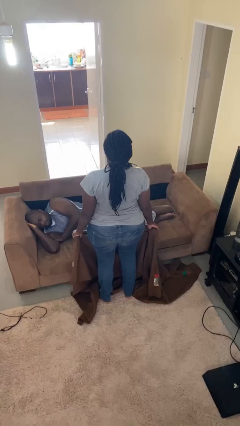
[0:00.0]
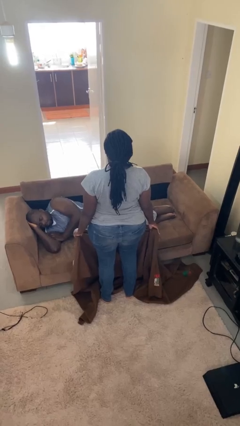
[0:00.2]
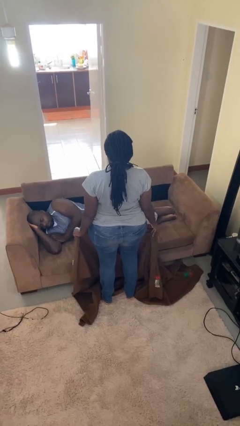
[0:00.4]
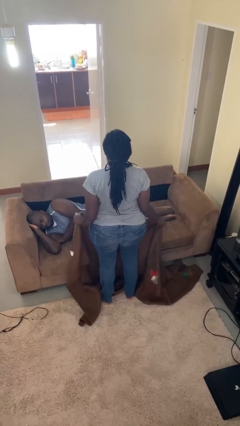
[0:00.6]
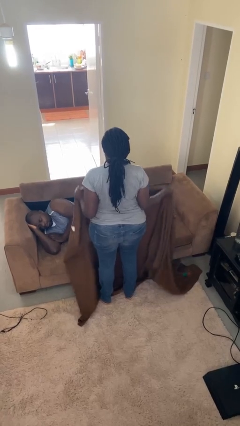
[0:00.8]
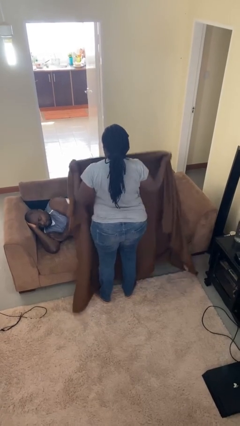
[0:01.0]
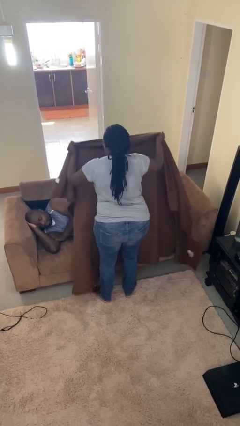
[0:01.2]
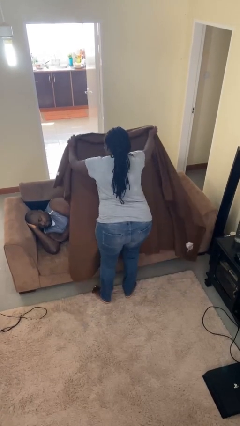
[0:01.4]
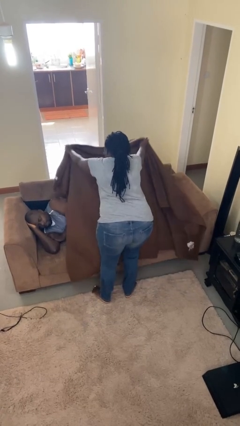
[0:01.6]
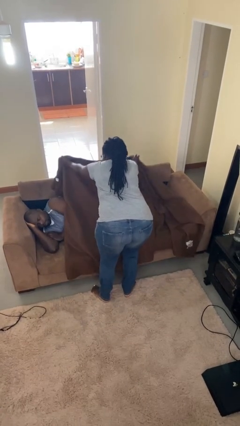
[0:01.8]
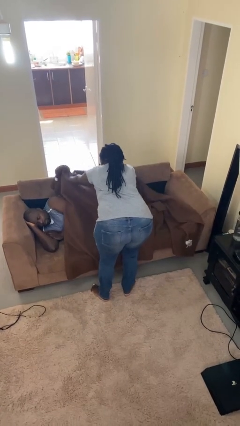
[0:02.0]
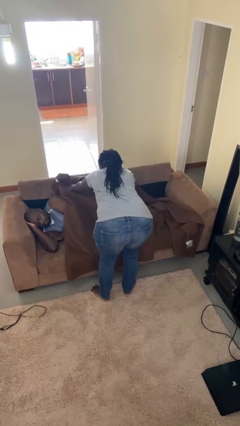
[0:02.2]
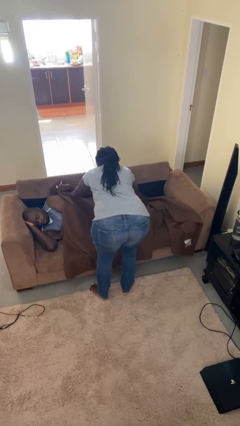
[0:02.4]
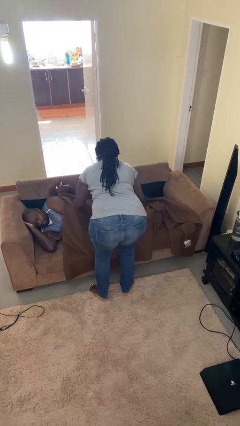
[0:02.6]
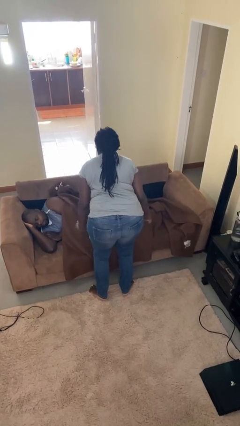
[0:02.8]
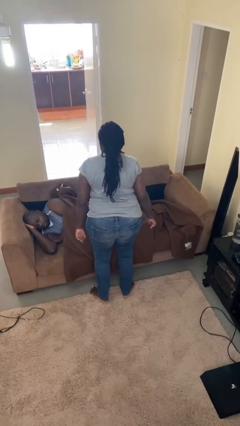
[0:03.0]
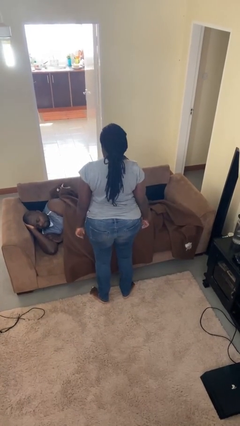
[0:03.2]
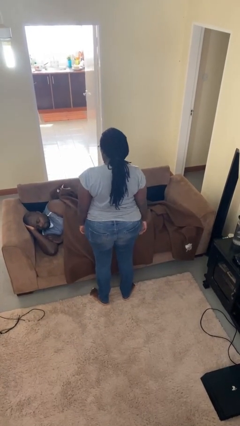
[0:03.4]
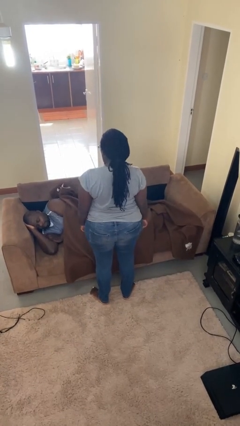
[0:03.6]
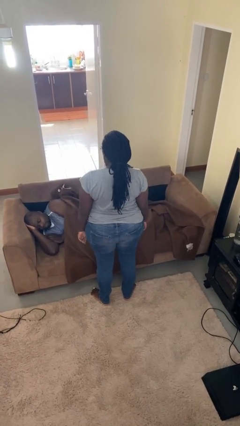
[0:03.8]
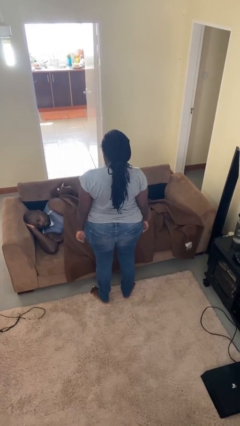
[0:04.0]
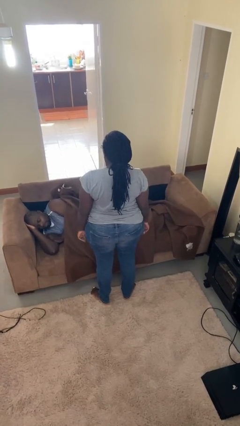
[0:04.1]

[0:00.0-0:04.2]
person covers friend with blanket

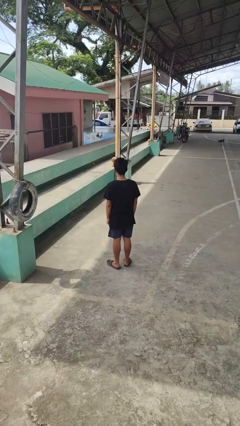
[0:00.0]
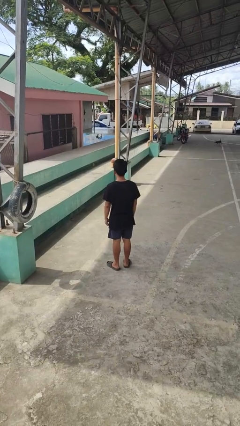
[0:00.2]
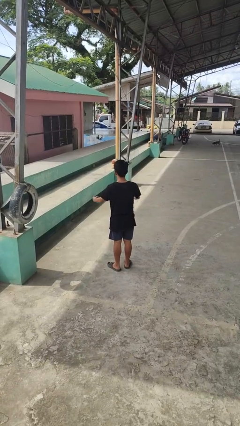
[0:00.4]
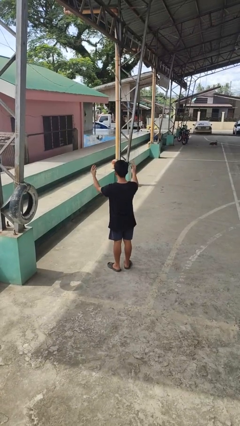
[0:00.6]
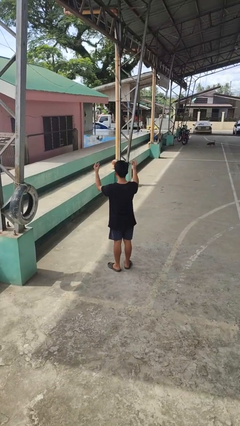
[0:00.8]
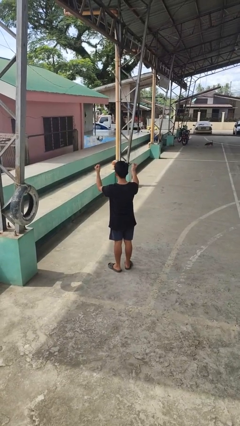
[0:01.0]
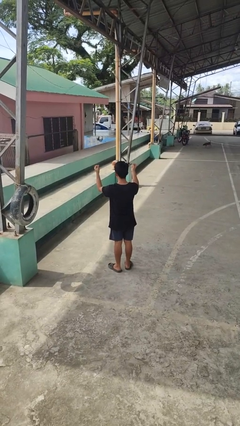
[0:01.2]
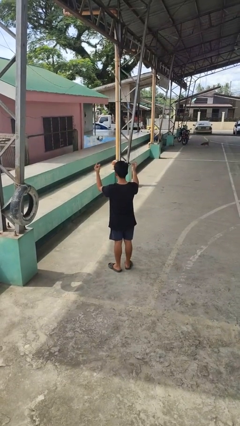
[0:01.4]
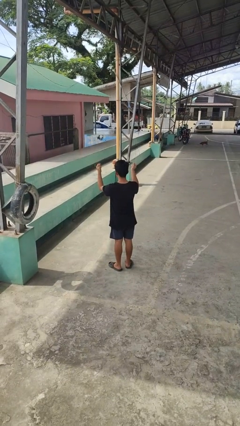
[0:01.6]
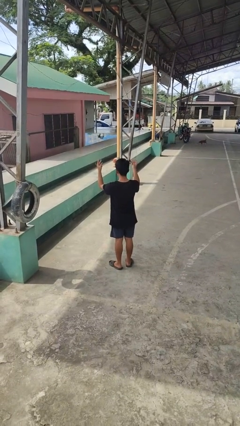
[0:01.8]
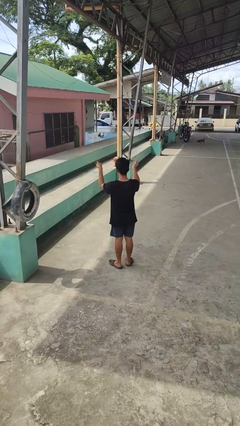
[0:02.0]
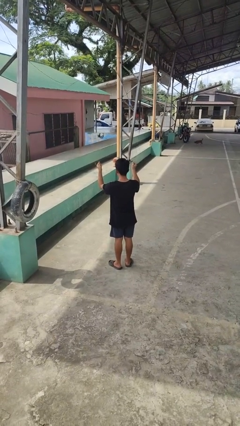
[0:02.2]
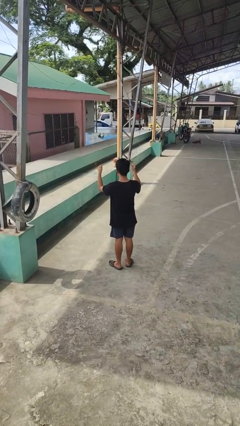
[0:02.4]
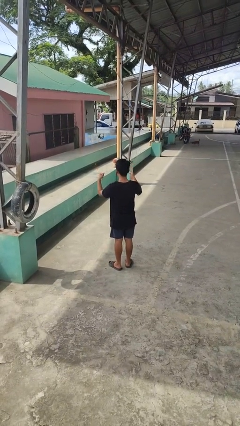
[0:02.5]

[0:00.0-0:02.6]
person snaps fingers

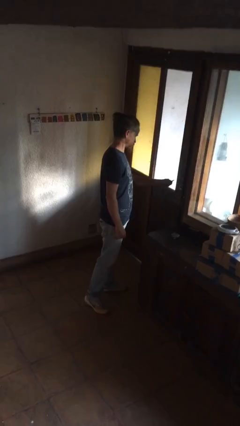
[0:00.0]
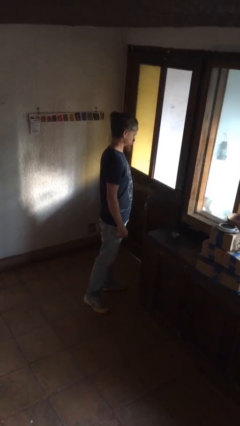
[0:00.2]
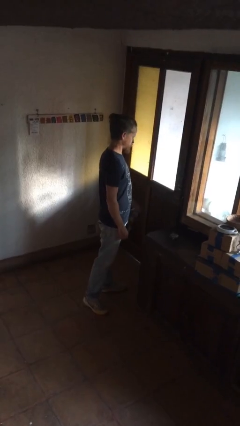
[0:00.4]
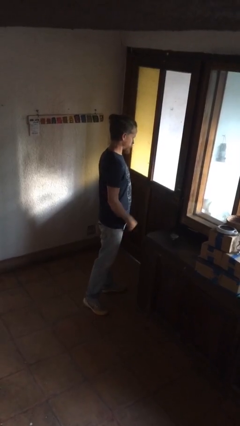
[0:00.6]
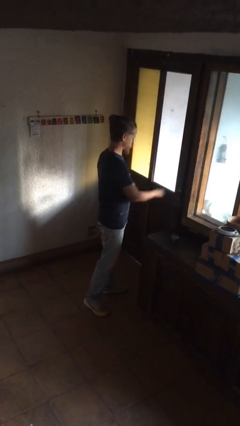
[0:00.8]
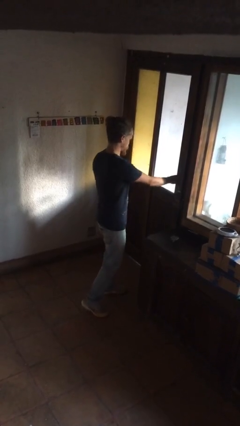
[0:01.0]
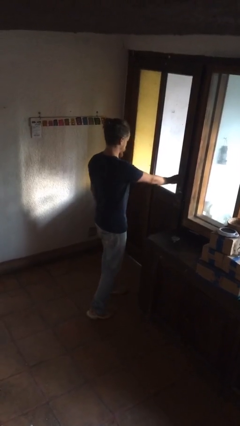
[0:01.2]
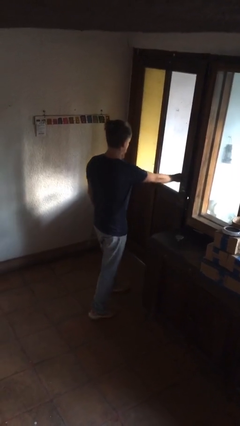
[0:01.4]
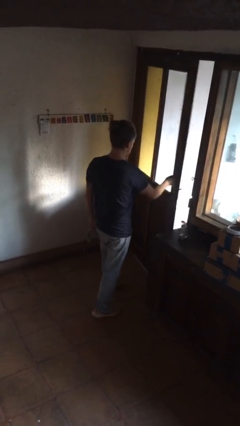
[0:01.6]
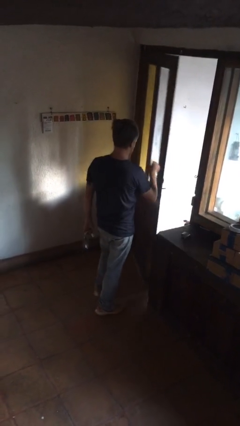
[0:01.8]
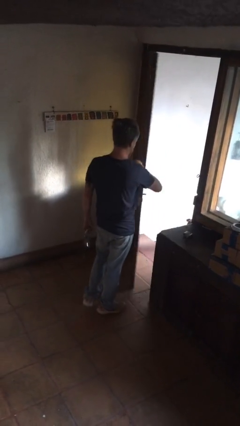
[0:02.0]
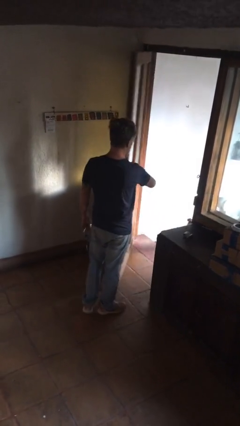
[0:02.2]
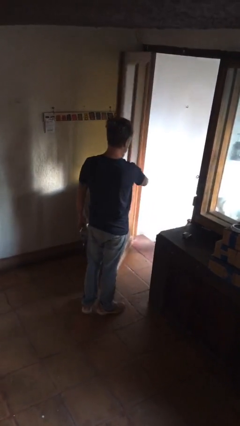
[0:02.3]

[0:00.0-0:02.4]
person opens facility door

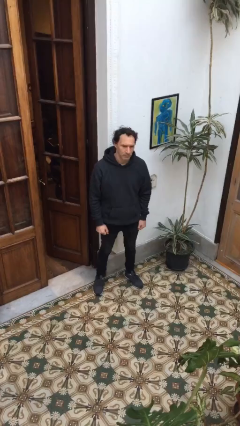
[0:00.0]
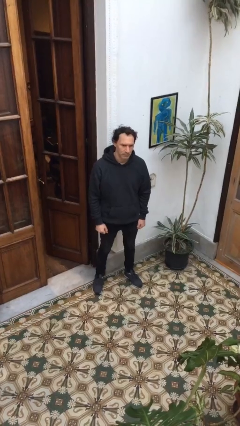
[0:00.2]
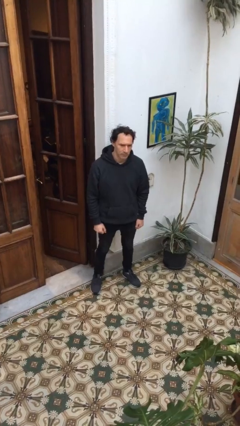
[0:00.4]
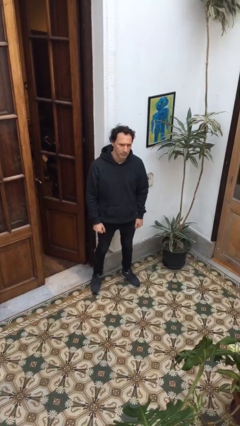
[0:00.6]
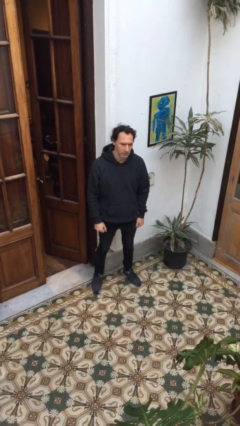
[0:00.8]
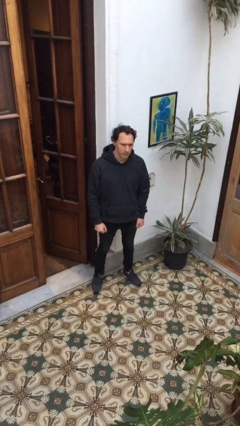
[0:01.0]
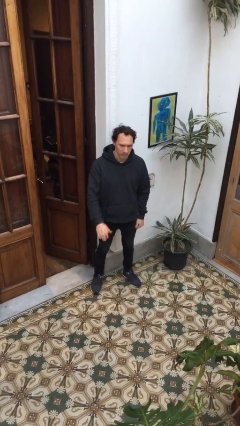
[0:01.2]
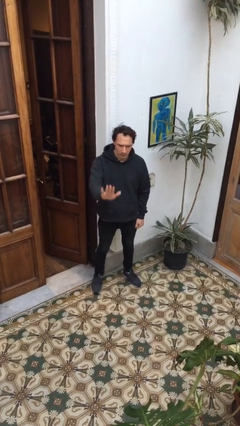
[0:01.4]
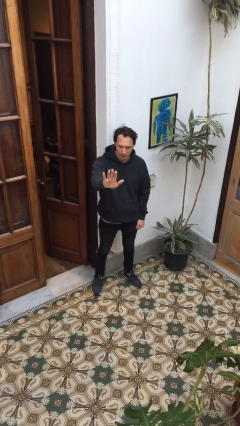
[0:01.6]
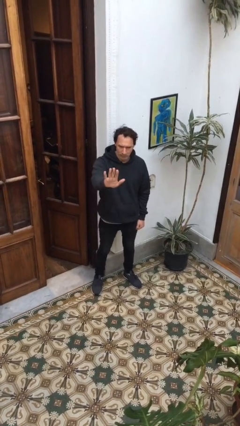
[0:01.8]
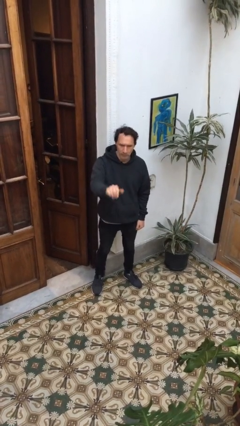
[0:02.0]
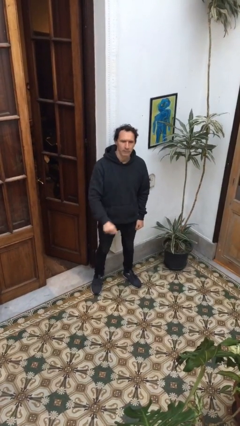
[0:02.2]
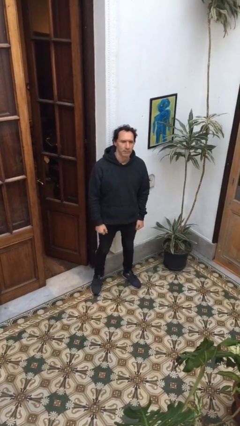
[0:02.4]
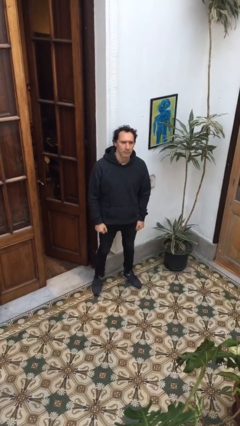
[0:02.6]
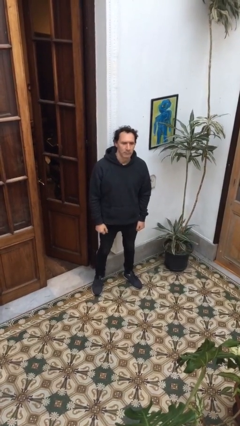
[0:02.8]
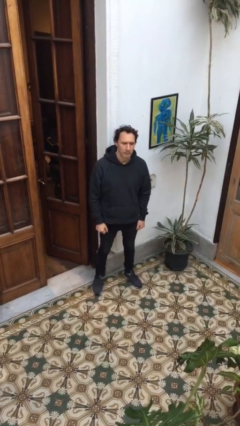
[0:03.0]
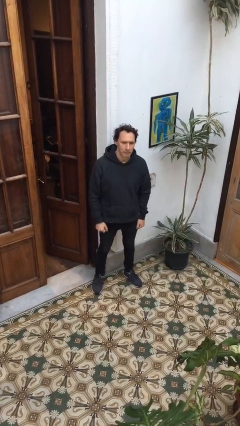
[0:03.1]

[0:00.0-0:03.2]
person gestures stop

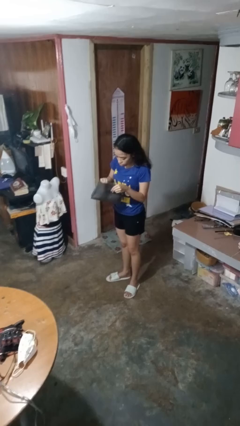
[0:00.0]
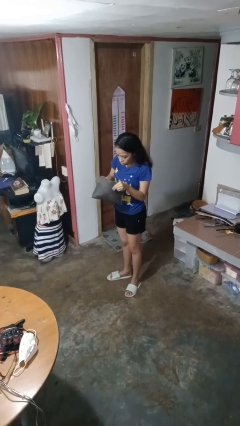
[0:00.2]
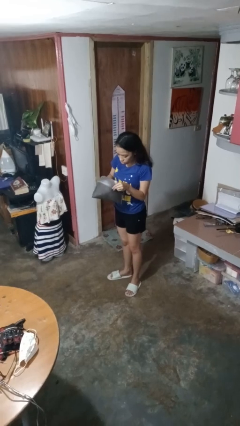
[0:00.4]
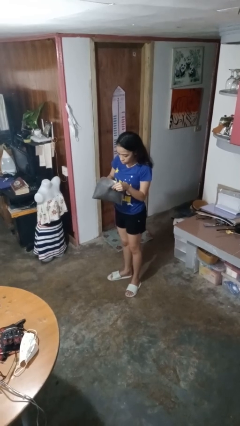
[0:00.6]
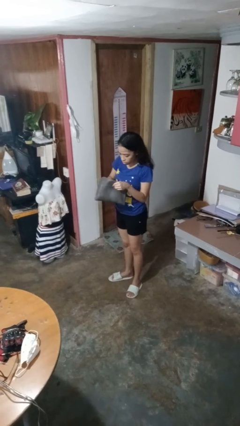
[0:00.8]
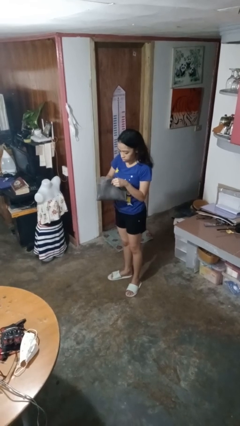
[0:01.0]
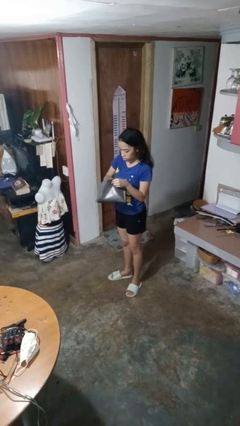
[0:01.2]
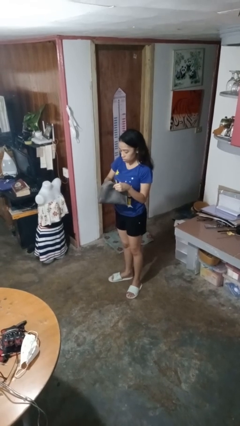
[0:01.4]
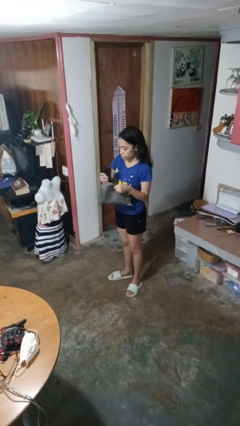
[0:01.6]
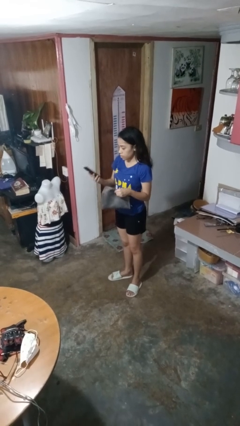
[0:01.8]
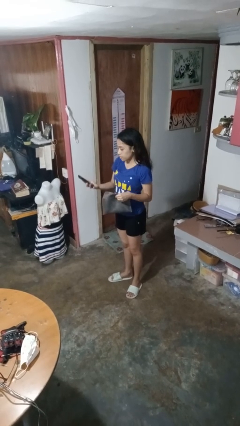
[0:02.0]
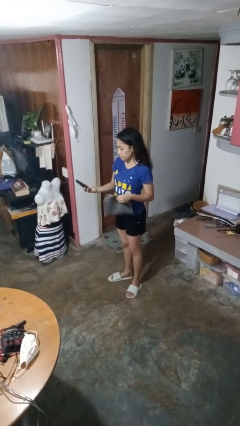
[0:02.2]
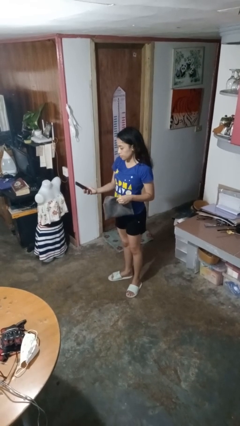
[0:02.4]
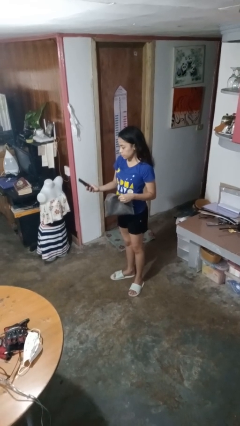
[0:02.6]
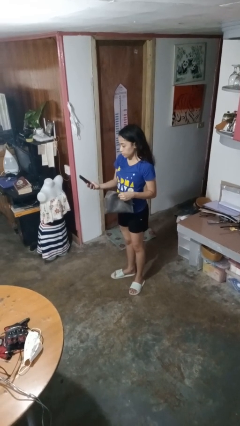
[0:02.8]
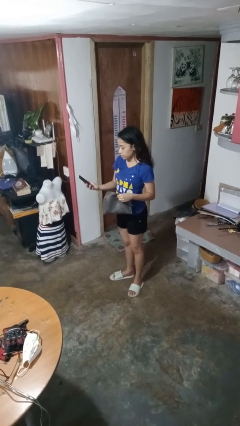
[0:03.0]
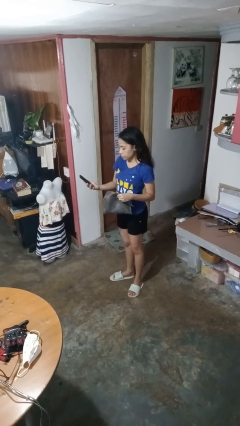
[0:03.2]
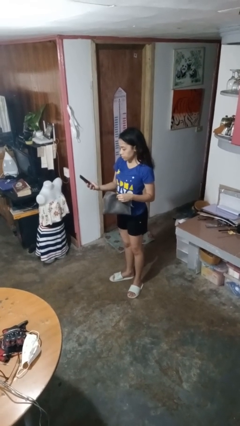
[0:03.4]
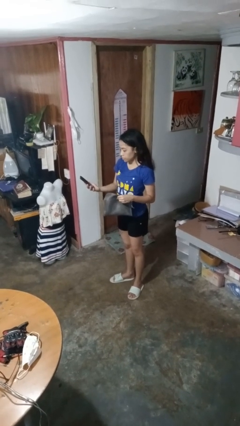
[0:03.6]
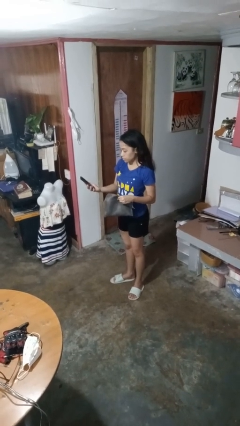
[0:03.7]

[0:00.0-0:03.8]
person takes object from purse

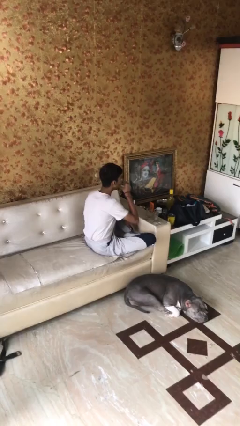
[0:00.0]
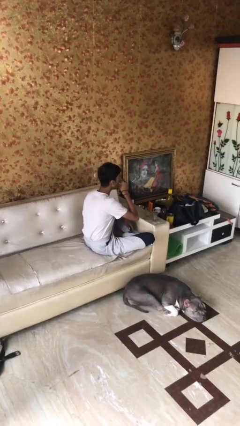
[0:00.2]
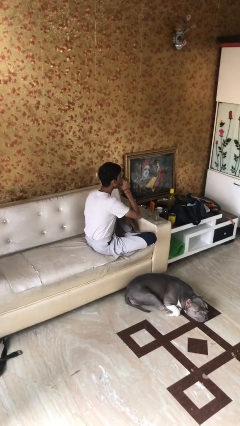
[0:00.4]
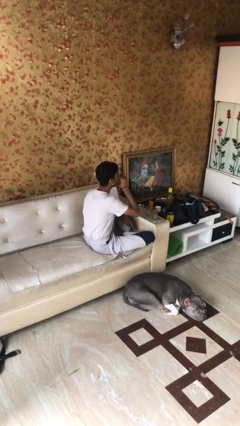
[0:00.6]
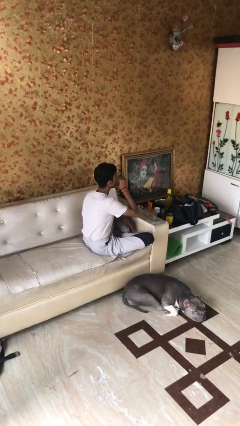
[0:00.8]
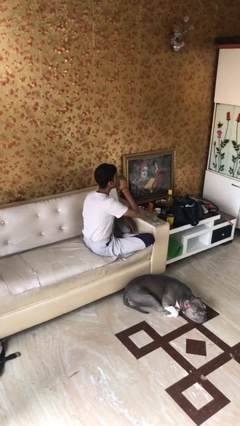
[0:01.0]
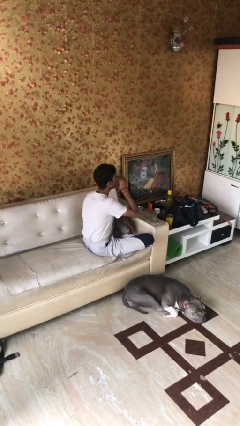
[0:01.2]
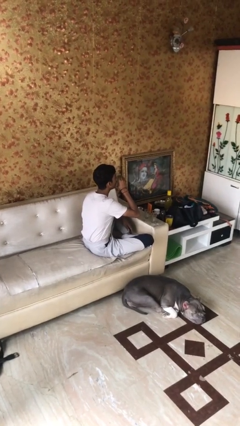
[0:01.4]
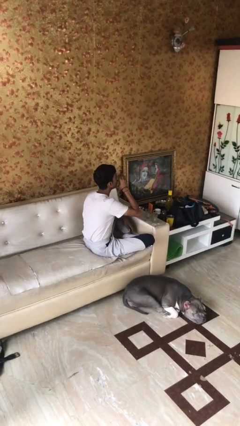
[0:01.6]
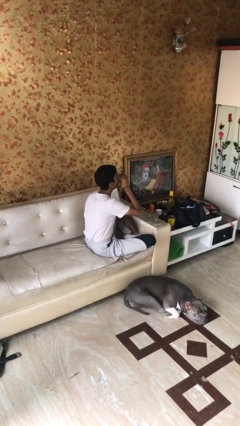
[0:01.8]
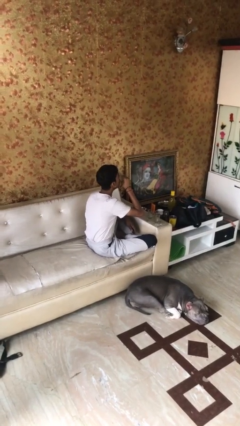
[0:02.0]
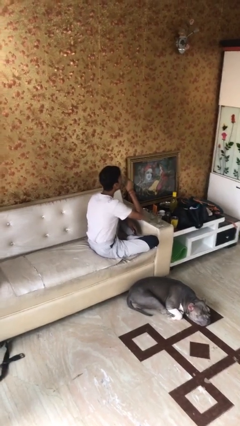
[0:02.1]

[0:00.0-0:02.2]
person drinks from shotglass
